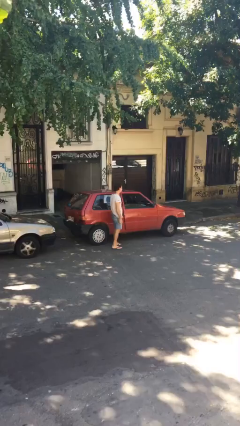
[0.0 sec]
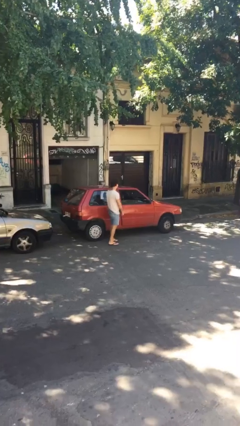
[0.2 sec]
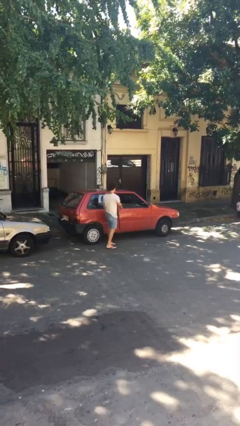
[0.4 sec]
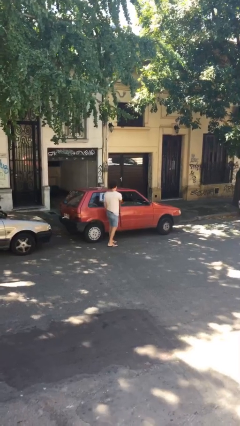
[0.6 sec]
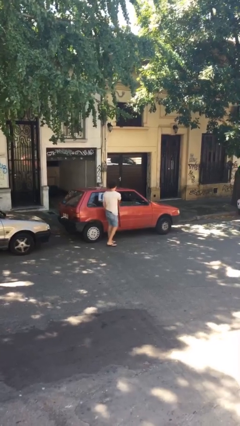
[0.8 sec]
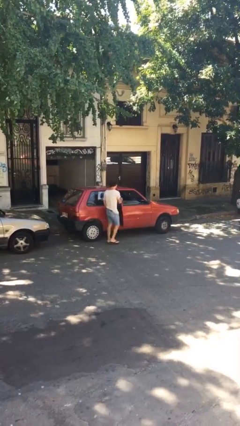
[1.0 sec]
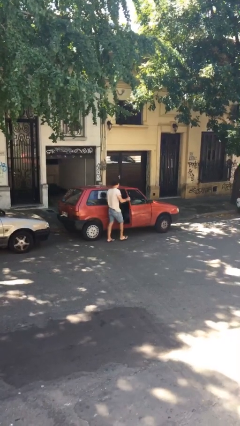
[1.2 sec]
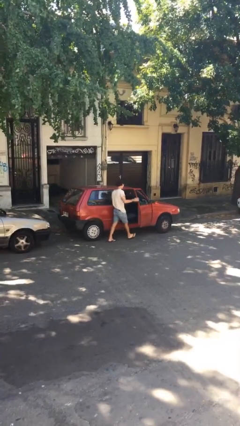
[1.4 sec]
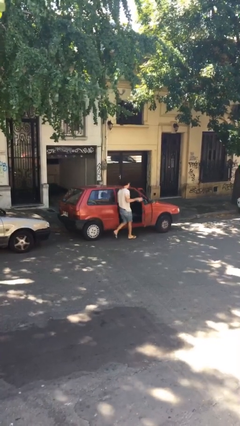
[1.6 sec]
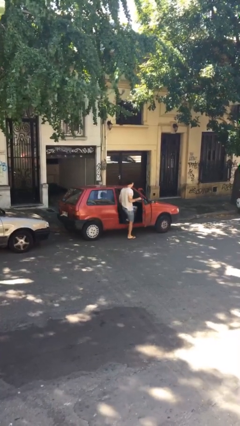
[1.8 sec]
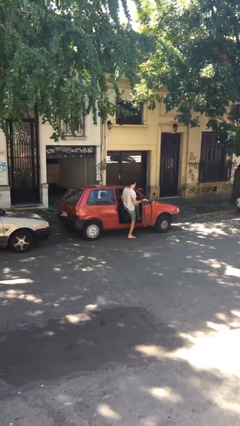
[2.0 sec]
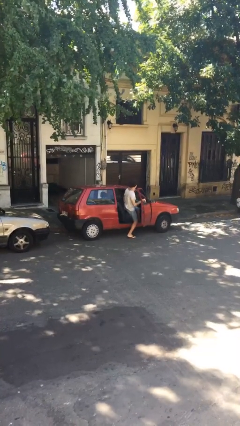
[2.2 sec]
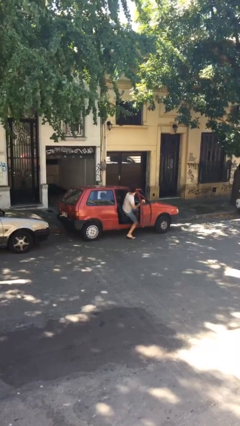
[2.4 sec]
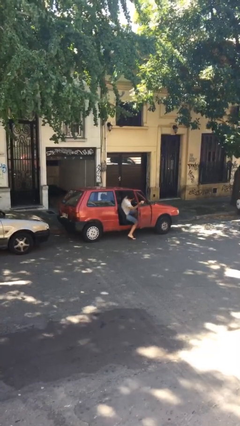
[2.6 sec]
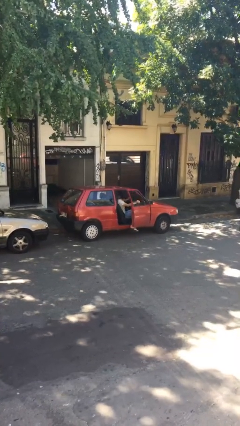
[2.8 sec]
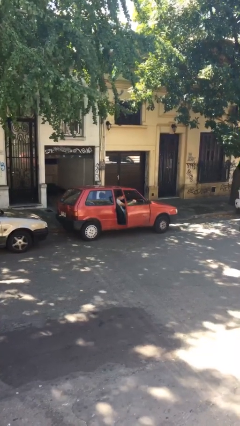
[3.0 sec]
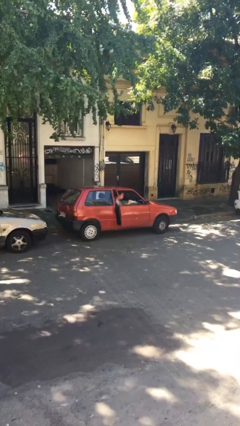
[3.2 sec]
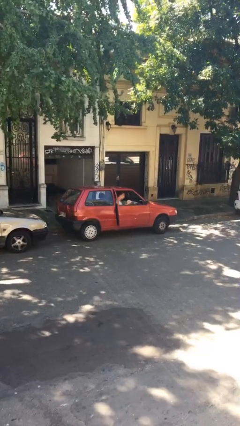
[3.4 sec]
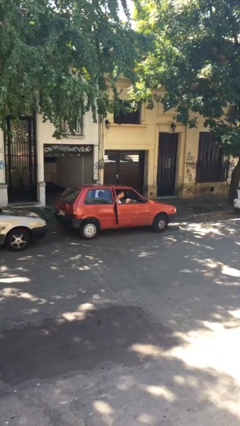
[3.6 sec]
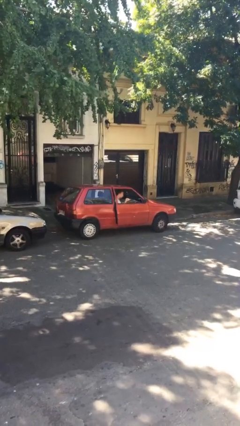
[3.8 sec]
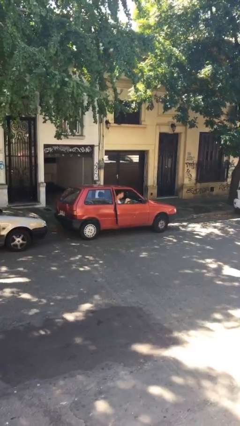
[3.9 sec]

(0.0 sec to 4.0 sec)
car picks up person

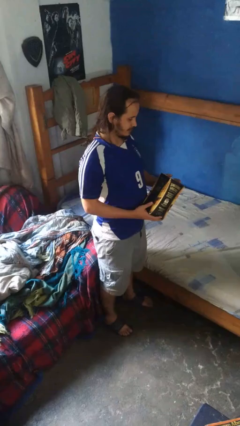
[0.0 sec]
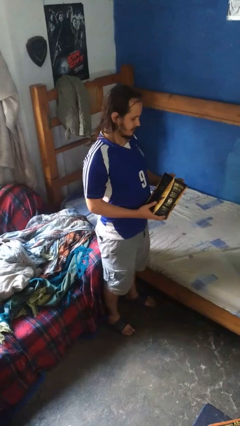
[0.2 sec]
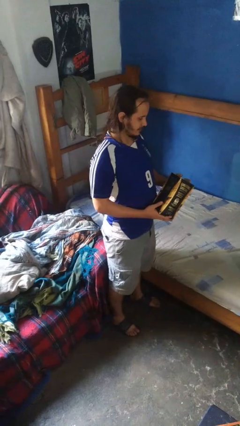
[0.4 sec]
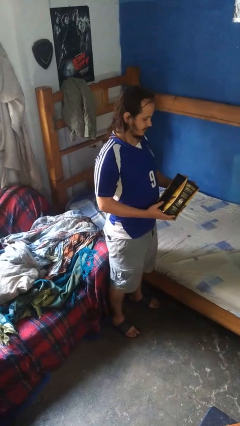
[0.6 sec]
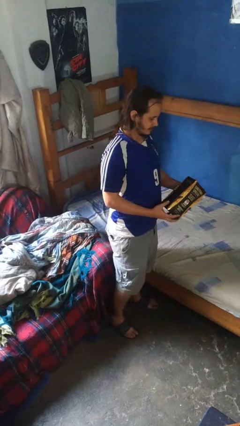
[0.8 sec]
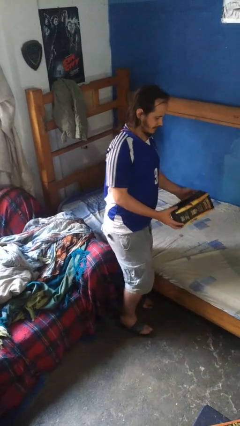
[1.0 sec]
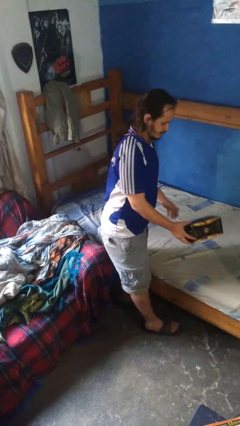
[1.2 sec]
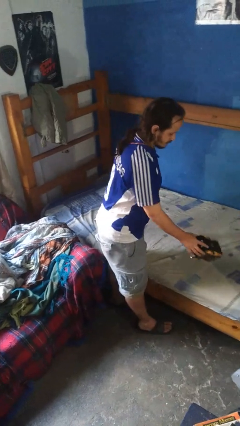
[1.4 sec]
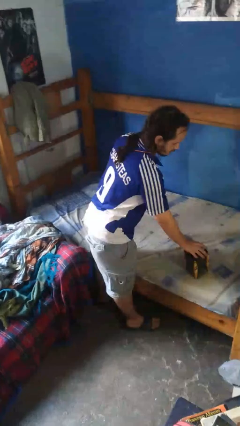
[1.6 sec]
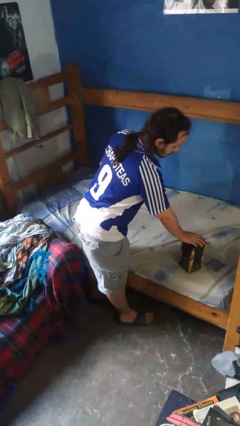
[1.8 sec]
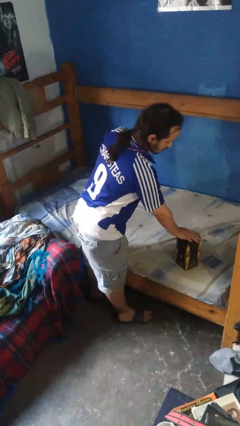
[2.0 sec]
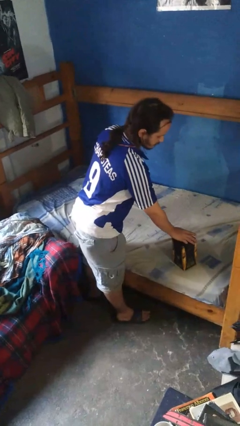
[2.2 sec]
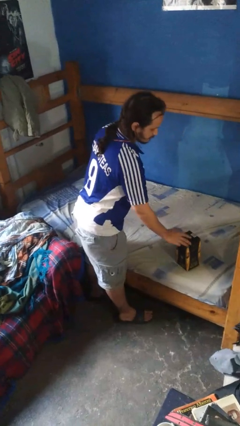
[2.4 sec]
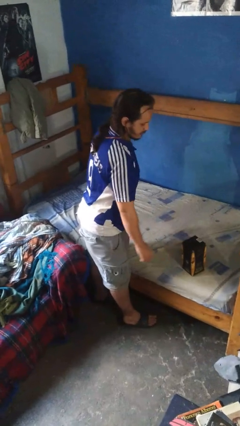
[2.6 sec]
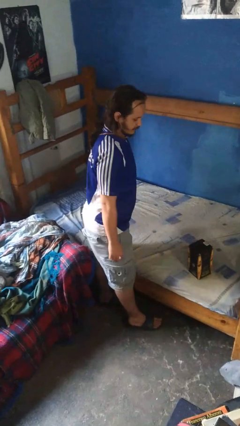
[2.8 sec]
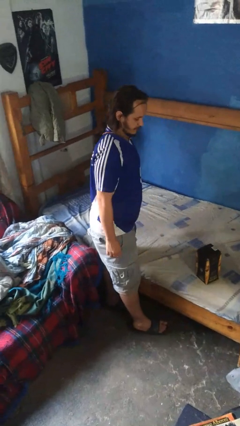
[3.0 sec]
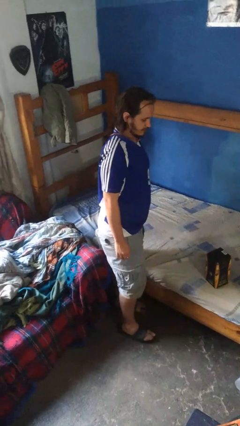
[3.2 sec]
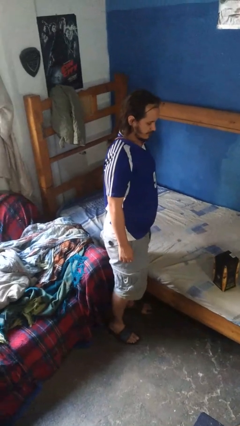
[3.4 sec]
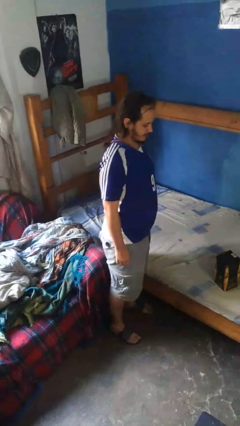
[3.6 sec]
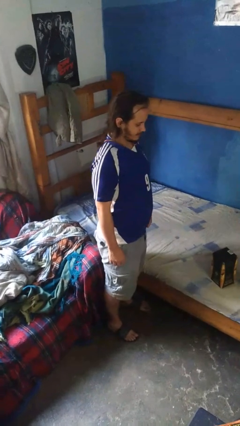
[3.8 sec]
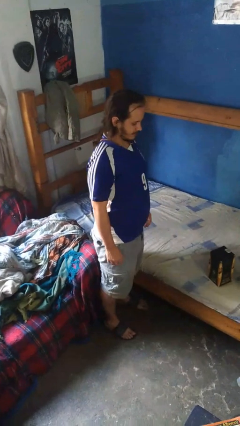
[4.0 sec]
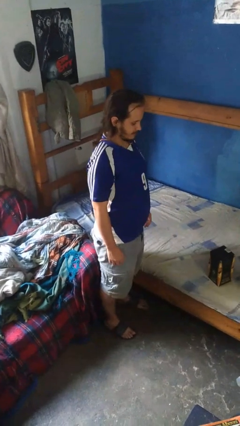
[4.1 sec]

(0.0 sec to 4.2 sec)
person puts down object on bed

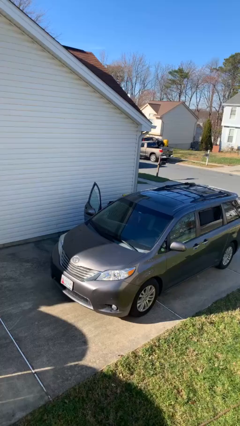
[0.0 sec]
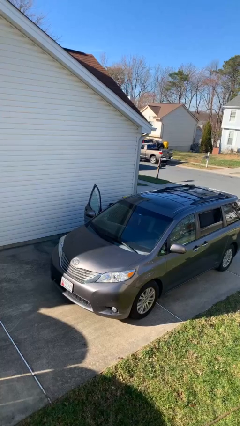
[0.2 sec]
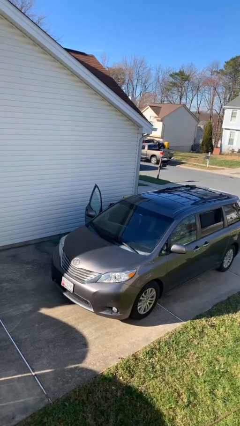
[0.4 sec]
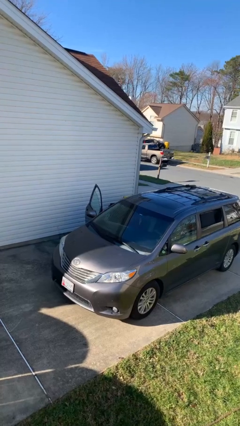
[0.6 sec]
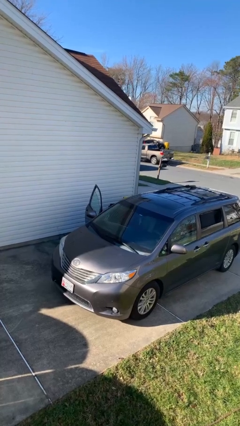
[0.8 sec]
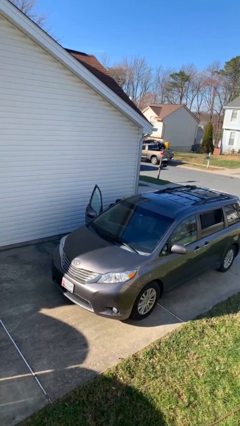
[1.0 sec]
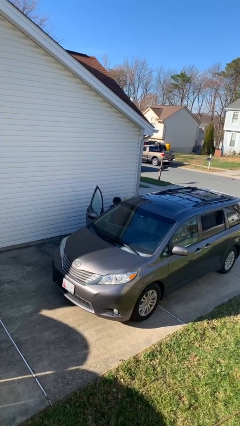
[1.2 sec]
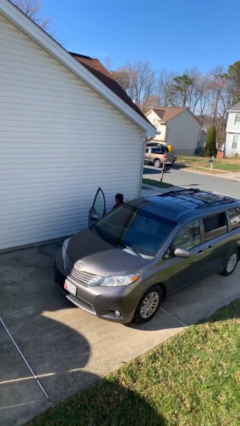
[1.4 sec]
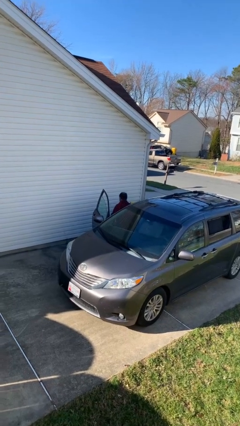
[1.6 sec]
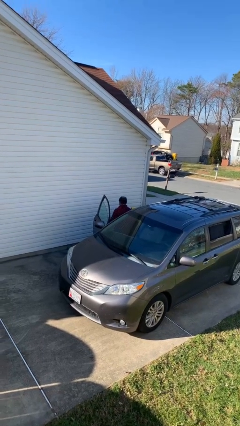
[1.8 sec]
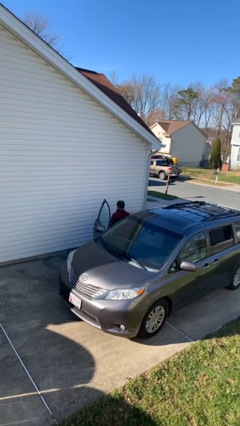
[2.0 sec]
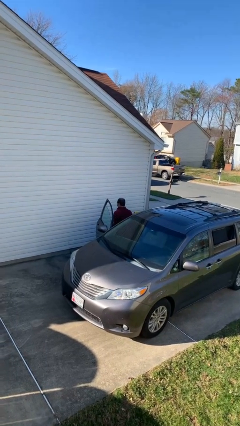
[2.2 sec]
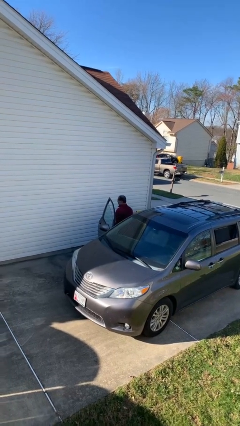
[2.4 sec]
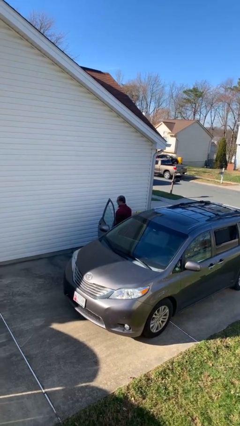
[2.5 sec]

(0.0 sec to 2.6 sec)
person exits car

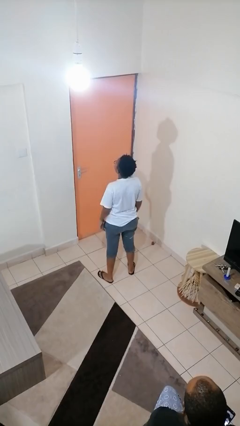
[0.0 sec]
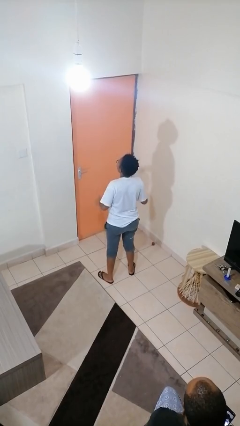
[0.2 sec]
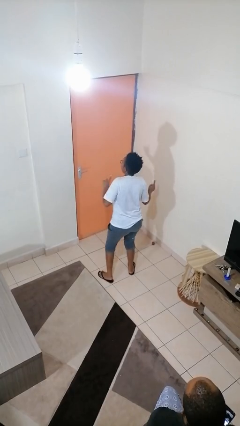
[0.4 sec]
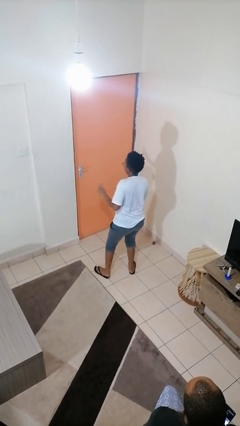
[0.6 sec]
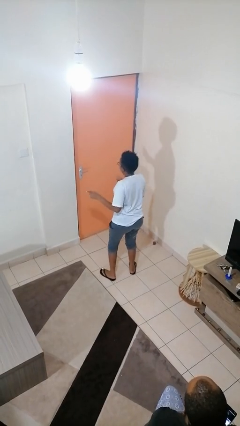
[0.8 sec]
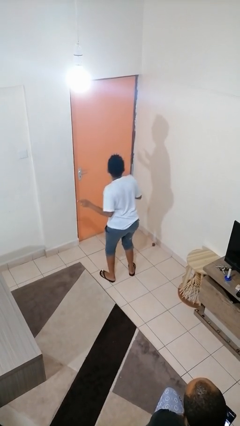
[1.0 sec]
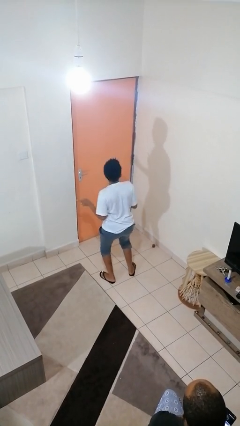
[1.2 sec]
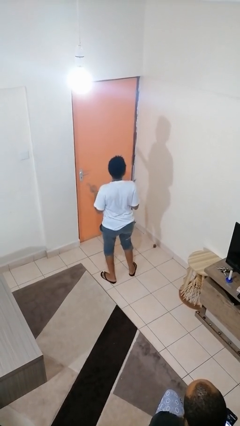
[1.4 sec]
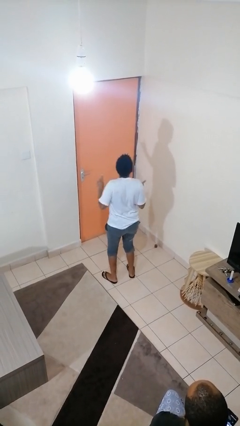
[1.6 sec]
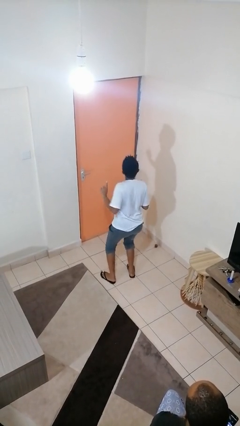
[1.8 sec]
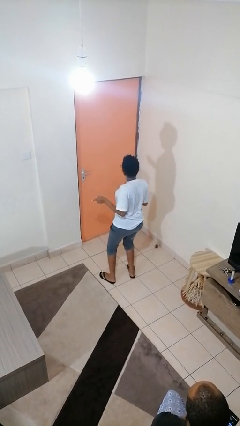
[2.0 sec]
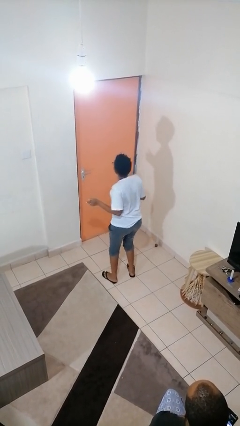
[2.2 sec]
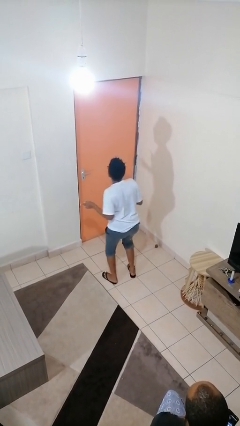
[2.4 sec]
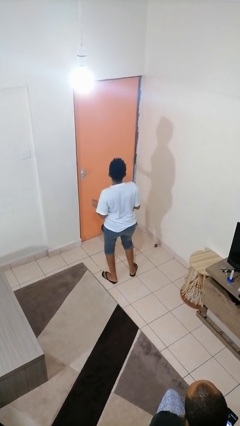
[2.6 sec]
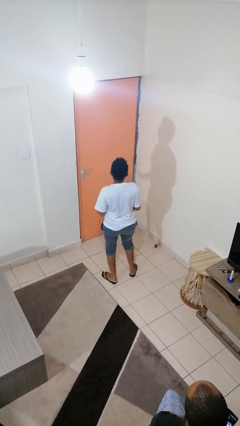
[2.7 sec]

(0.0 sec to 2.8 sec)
person dances in place

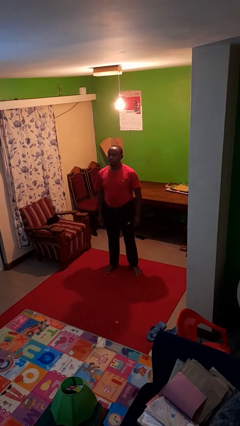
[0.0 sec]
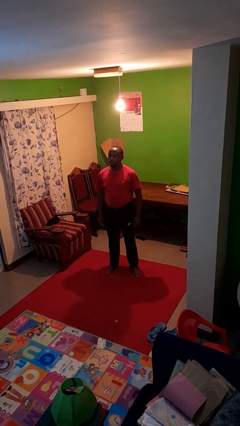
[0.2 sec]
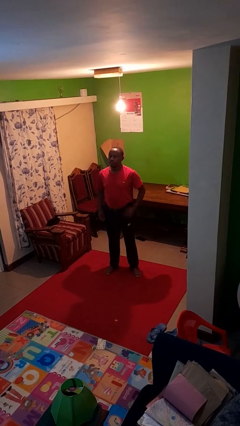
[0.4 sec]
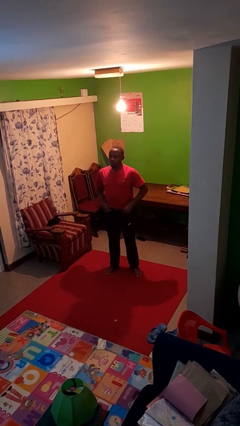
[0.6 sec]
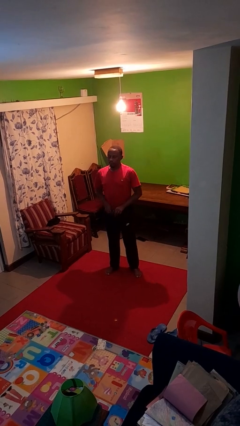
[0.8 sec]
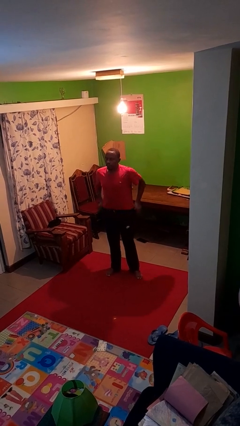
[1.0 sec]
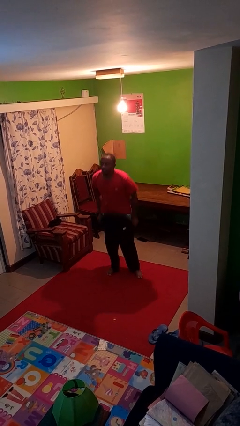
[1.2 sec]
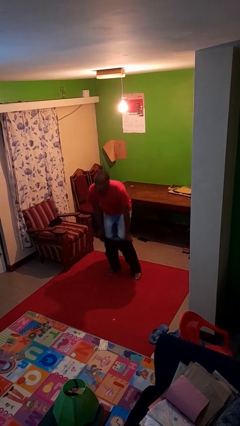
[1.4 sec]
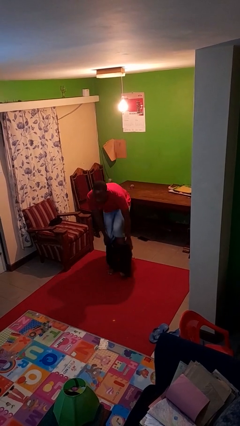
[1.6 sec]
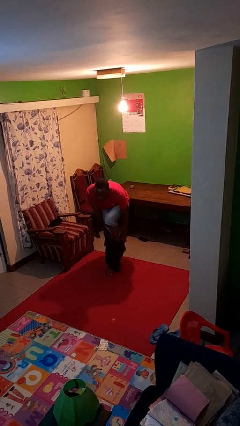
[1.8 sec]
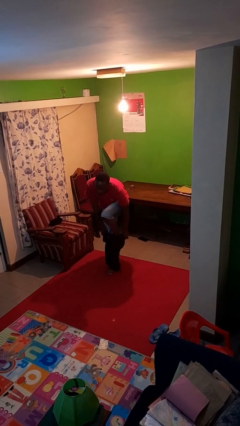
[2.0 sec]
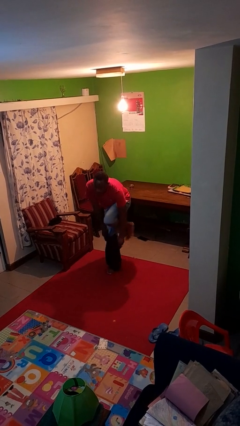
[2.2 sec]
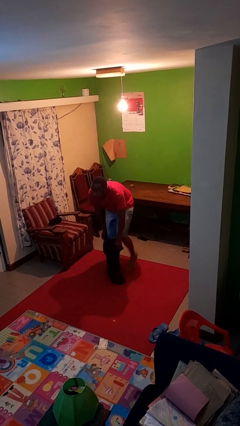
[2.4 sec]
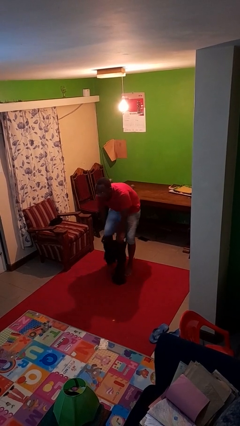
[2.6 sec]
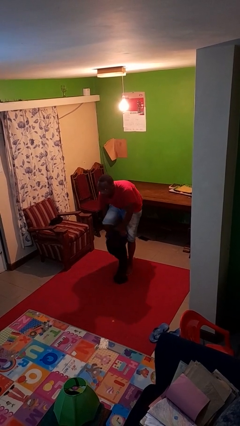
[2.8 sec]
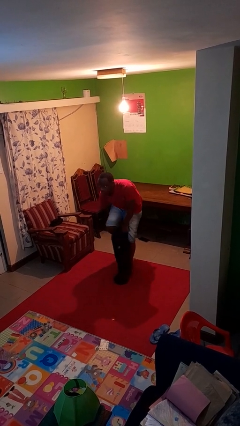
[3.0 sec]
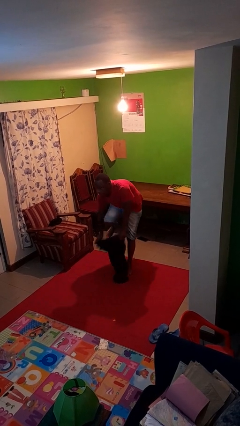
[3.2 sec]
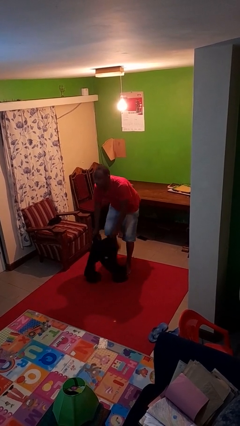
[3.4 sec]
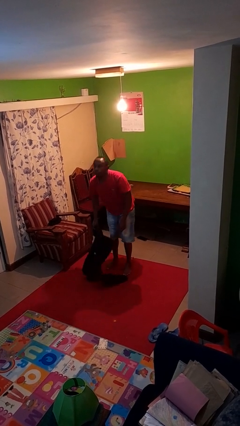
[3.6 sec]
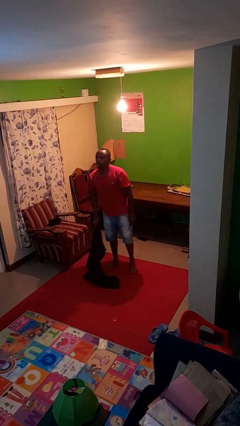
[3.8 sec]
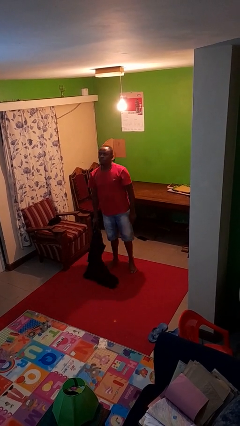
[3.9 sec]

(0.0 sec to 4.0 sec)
person takes off pants

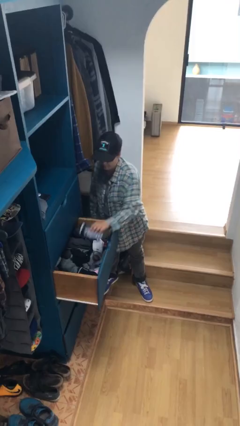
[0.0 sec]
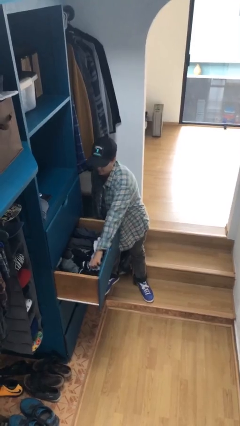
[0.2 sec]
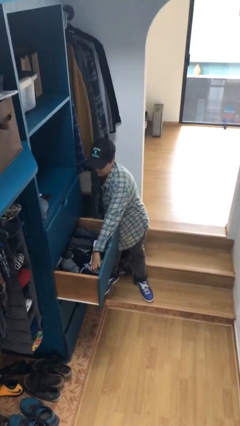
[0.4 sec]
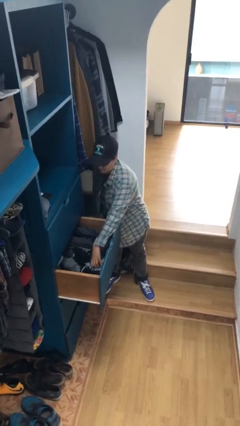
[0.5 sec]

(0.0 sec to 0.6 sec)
person puts clothes into dresser
